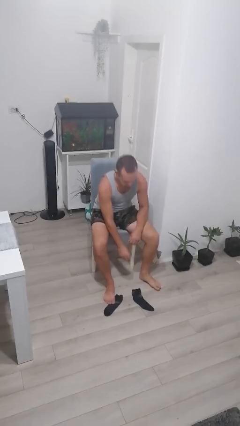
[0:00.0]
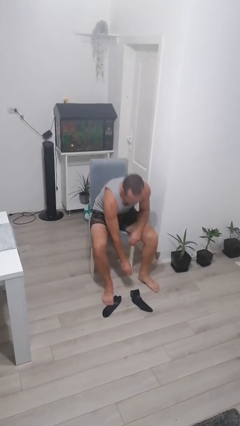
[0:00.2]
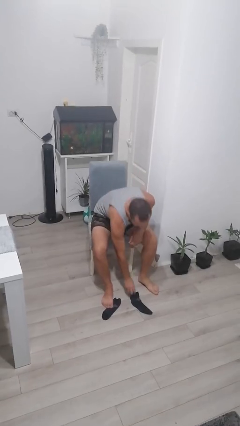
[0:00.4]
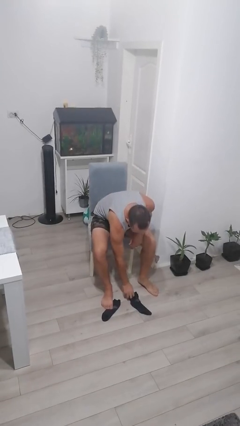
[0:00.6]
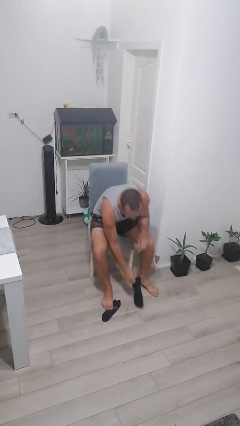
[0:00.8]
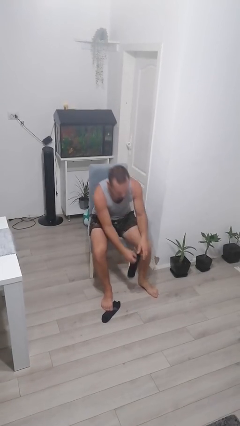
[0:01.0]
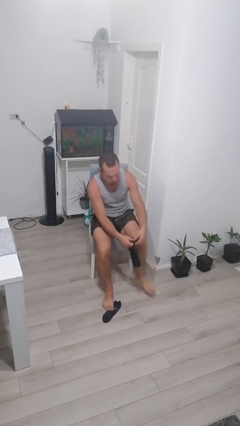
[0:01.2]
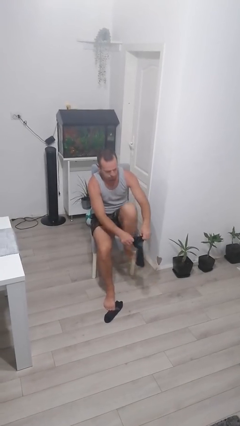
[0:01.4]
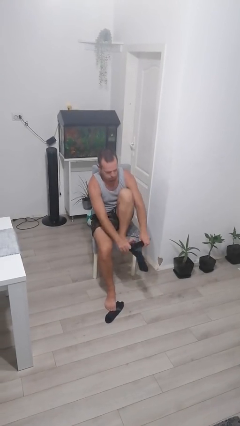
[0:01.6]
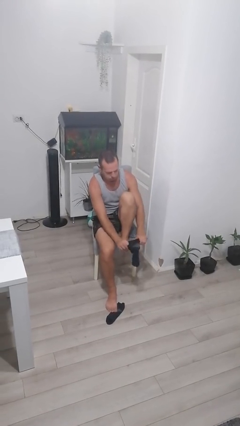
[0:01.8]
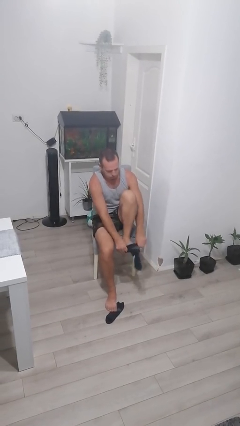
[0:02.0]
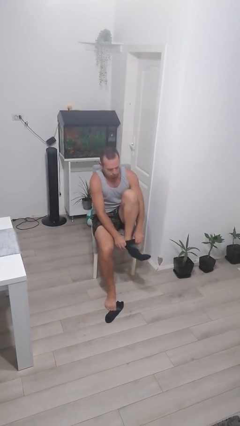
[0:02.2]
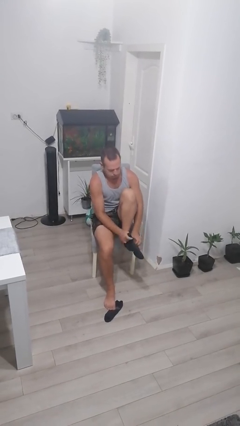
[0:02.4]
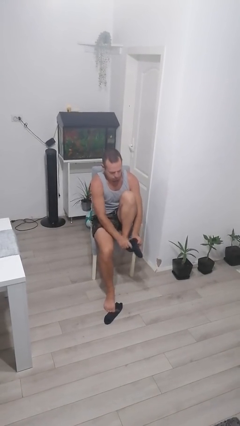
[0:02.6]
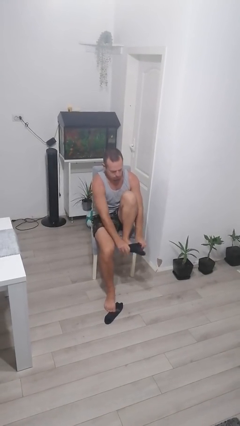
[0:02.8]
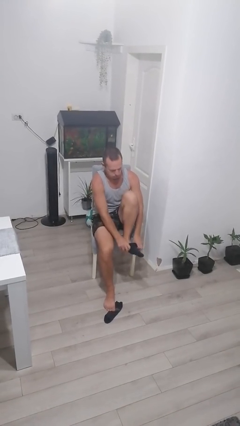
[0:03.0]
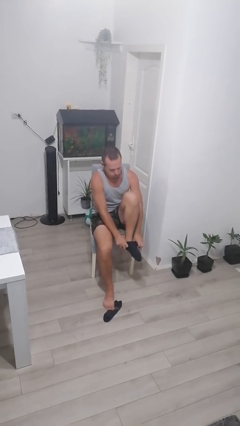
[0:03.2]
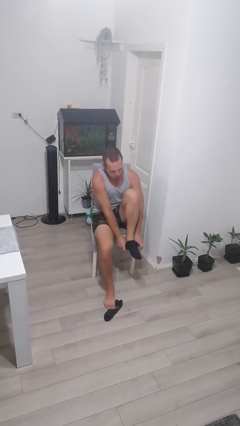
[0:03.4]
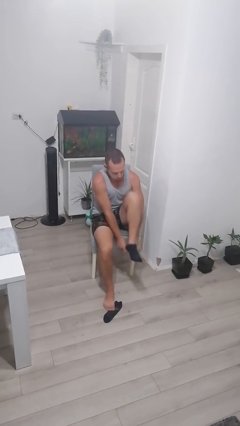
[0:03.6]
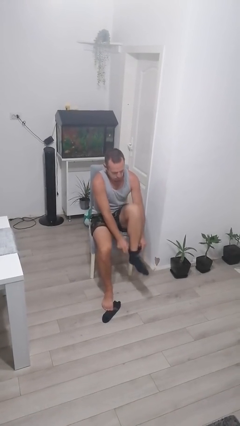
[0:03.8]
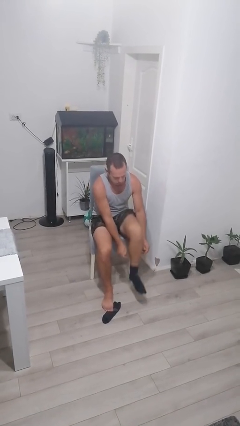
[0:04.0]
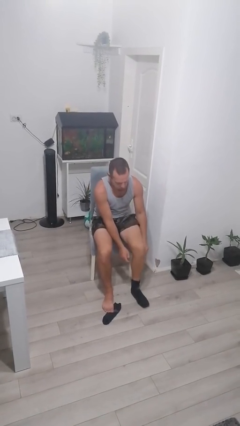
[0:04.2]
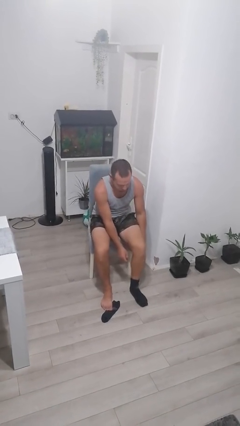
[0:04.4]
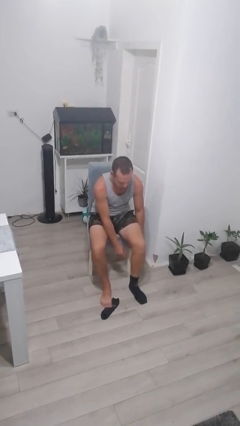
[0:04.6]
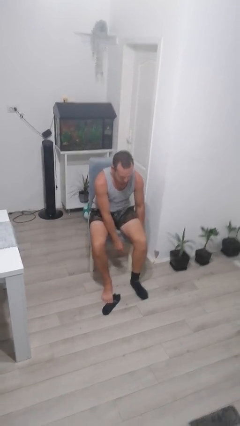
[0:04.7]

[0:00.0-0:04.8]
person puts on socks

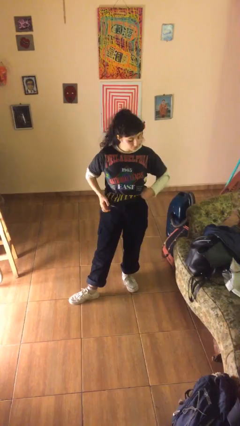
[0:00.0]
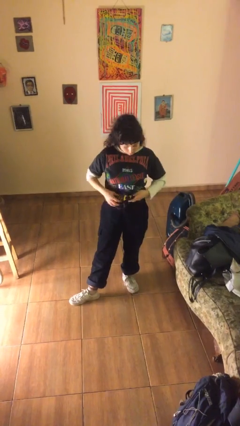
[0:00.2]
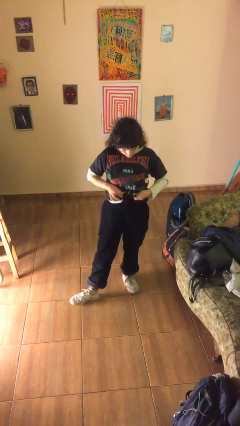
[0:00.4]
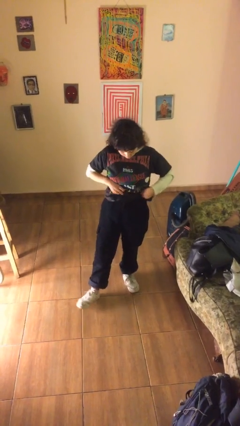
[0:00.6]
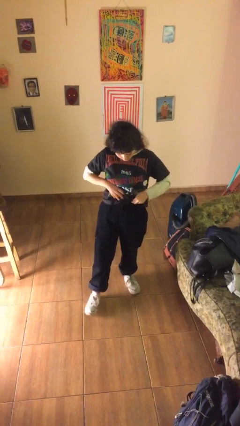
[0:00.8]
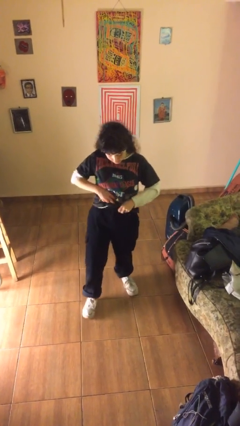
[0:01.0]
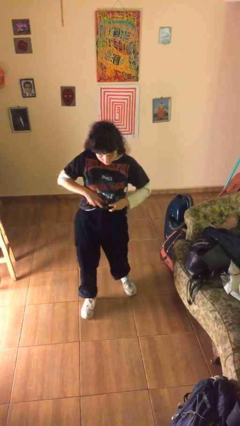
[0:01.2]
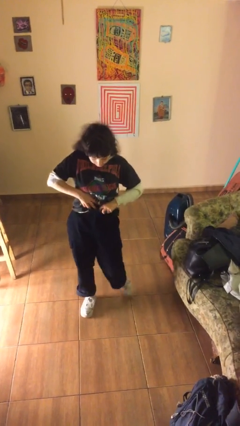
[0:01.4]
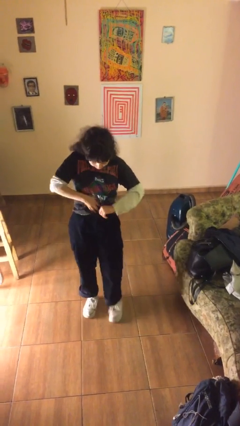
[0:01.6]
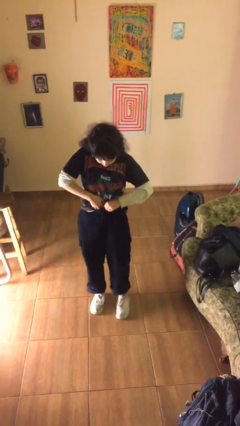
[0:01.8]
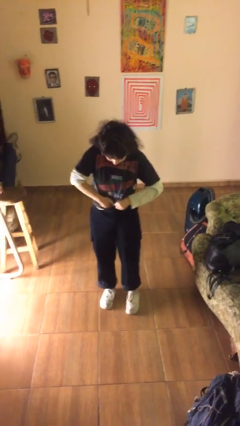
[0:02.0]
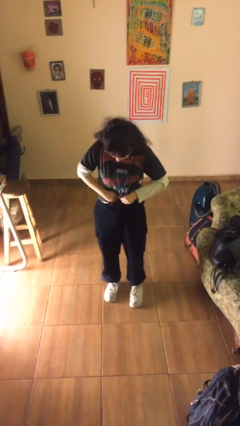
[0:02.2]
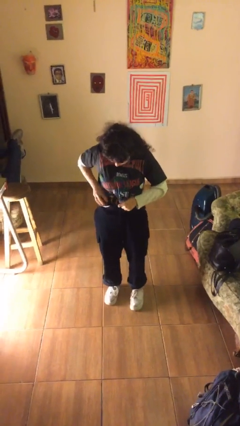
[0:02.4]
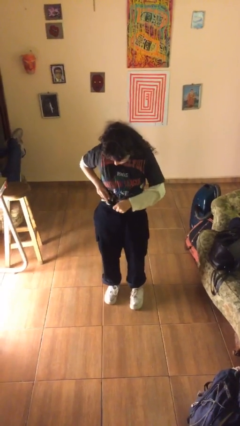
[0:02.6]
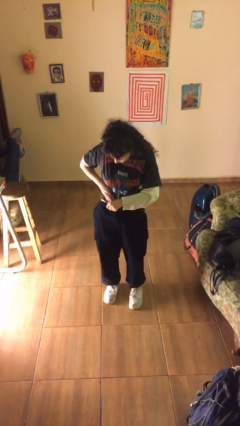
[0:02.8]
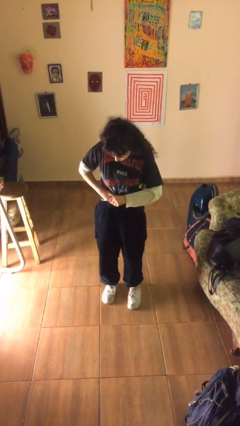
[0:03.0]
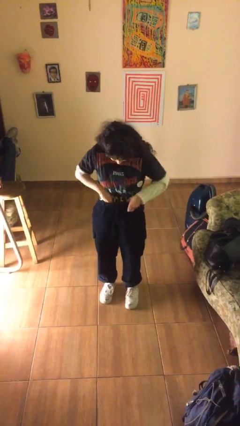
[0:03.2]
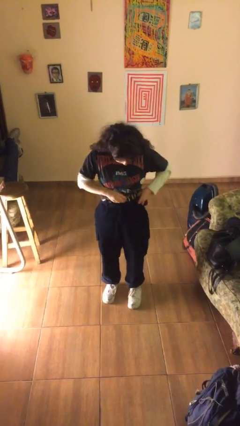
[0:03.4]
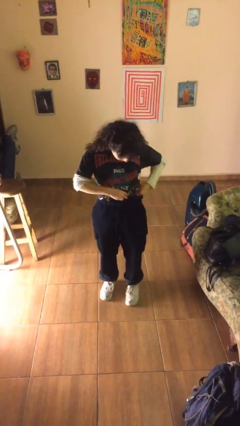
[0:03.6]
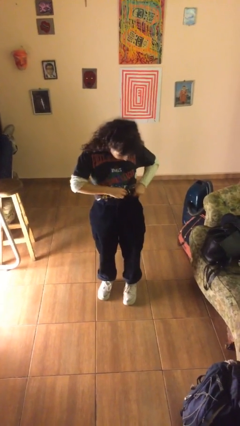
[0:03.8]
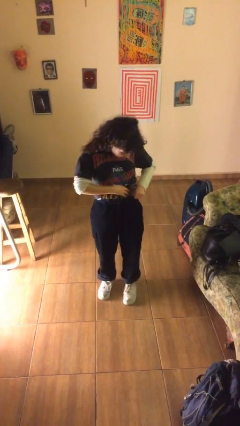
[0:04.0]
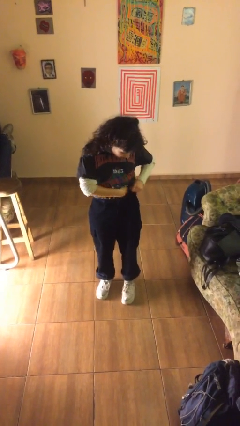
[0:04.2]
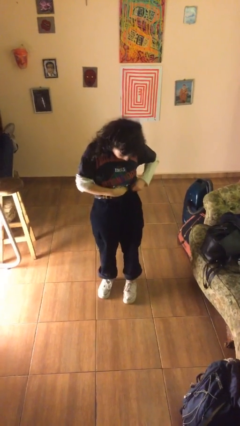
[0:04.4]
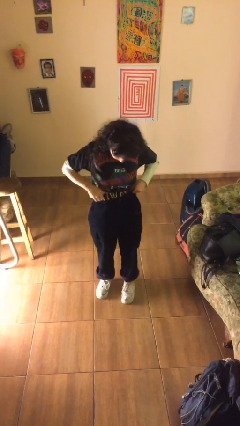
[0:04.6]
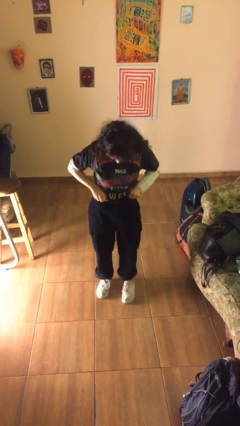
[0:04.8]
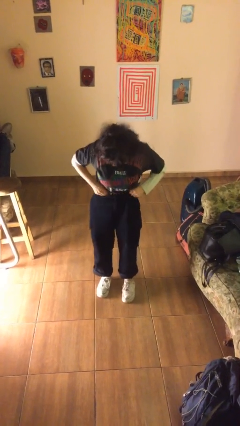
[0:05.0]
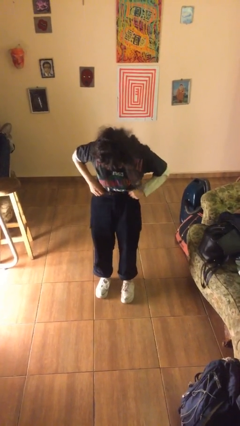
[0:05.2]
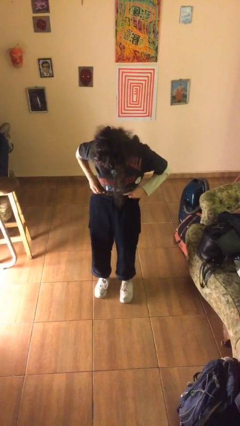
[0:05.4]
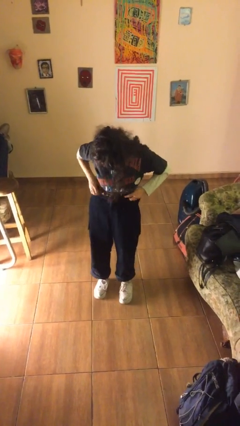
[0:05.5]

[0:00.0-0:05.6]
person tucks in shirt

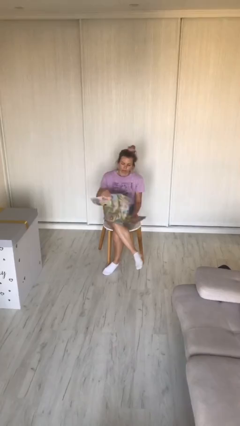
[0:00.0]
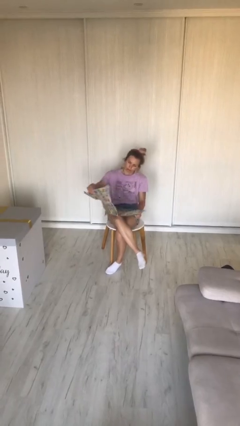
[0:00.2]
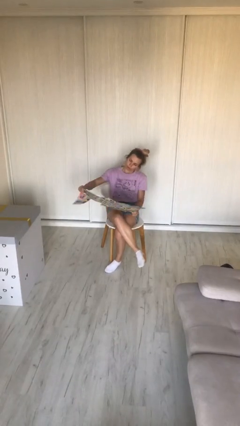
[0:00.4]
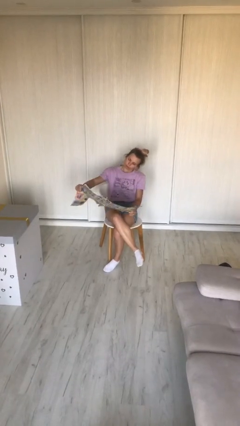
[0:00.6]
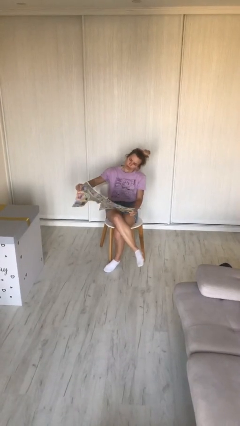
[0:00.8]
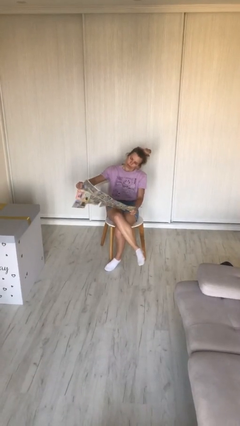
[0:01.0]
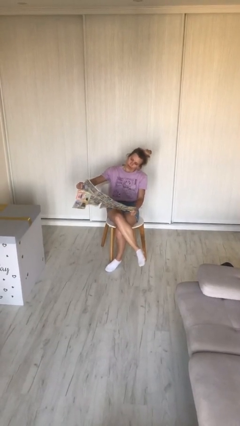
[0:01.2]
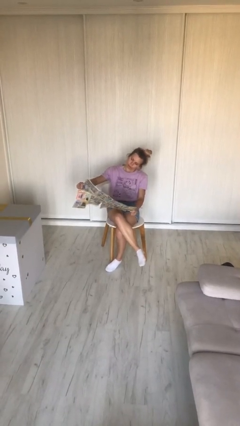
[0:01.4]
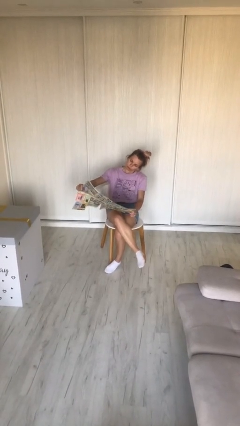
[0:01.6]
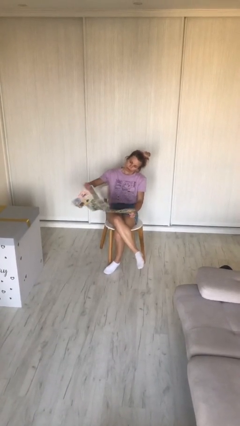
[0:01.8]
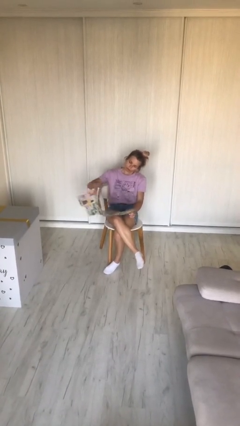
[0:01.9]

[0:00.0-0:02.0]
person reads newspaper

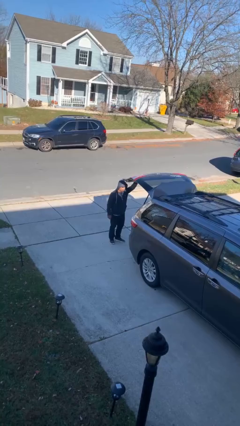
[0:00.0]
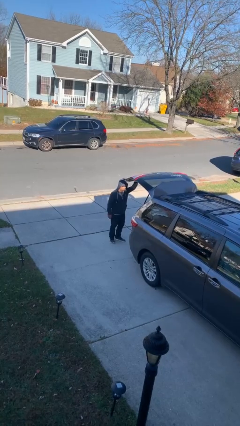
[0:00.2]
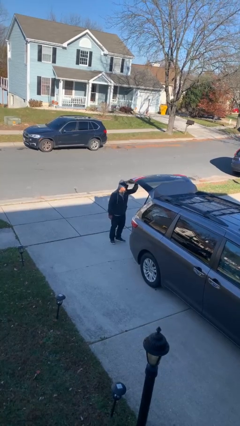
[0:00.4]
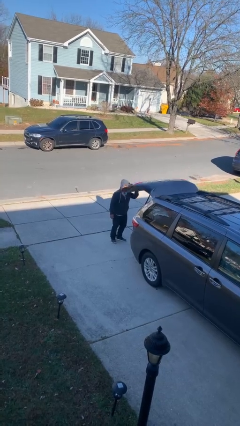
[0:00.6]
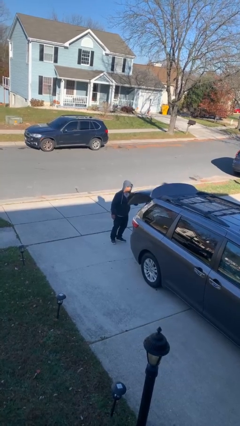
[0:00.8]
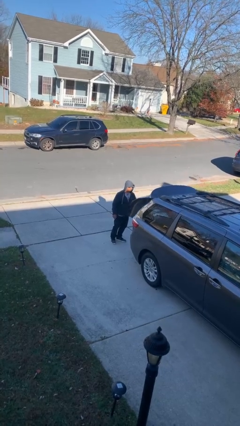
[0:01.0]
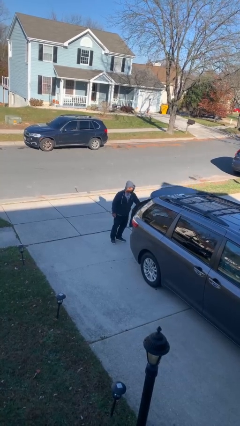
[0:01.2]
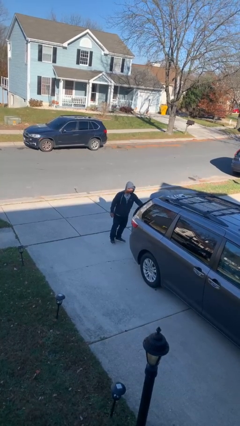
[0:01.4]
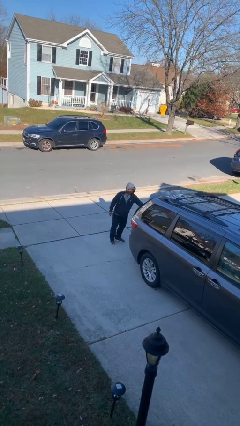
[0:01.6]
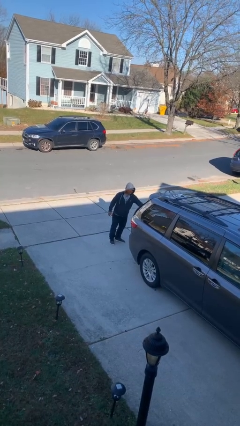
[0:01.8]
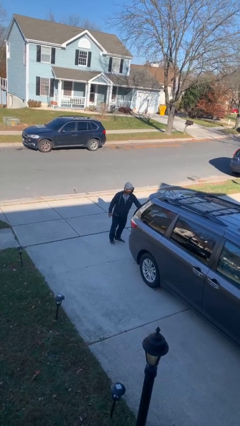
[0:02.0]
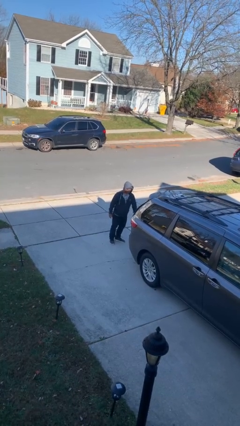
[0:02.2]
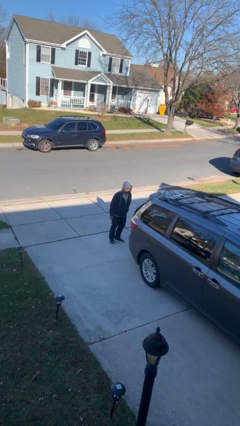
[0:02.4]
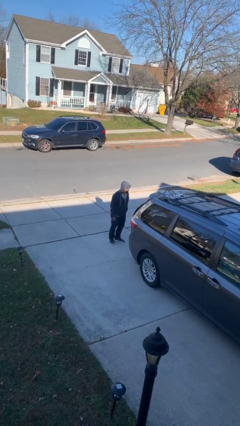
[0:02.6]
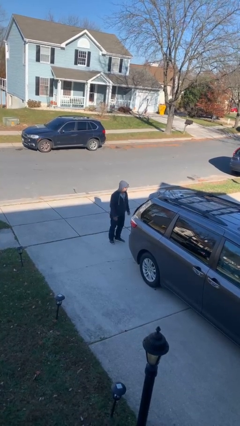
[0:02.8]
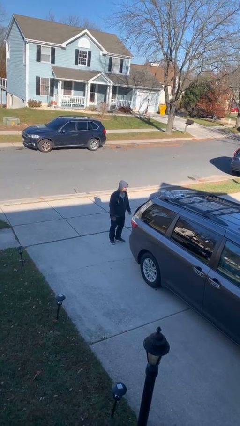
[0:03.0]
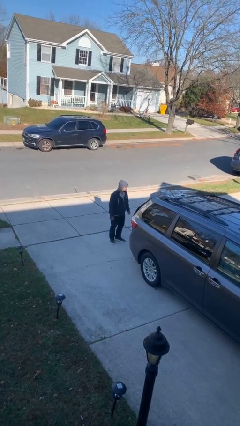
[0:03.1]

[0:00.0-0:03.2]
person closes car trunk

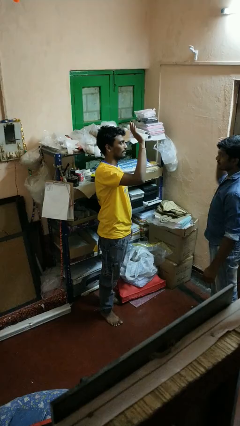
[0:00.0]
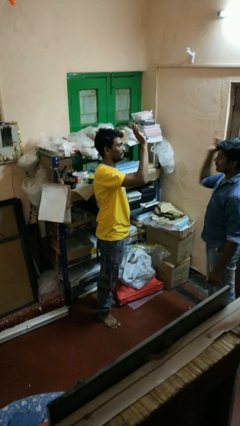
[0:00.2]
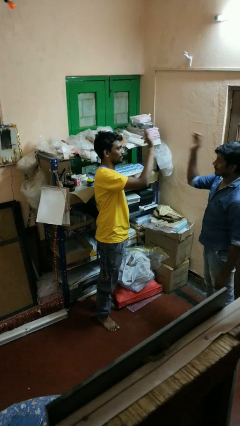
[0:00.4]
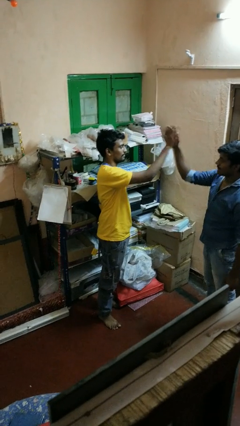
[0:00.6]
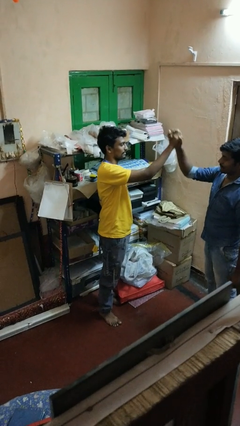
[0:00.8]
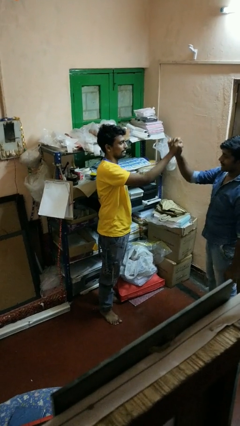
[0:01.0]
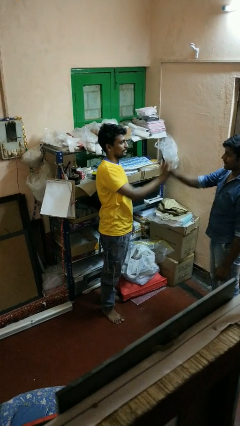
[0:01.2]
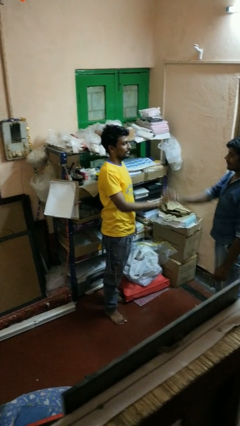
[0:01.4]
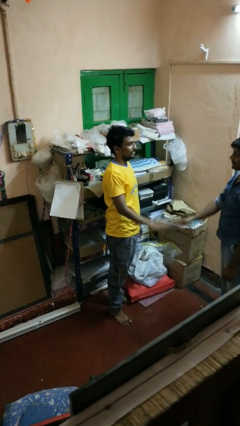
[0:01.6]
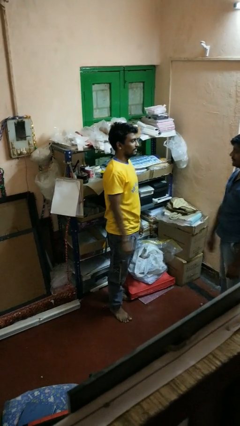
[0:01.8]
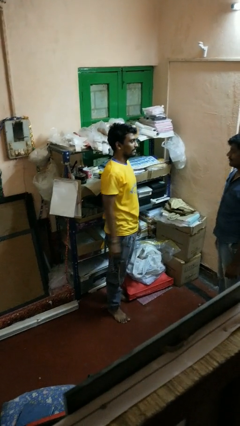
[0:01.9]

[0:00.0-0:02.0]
person highfives hand
